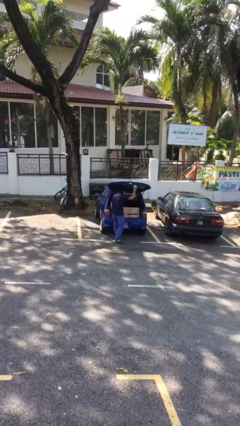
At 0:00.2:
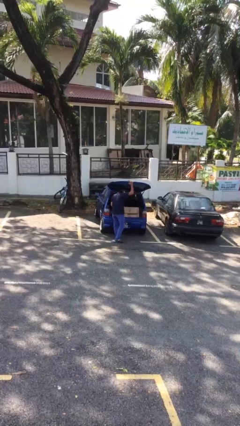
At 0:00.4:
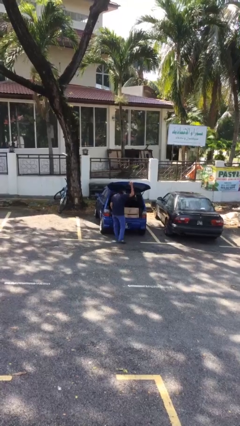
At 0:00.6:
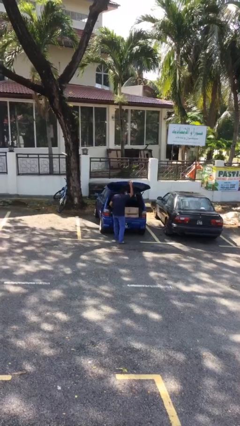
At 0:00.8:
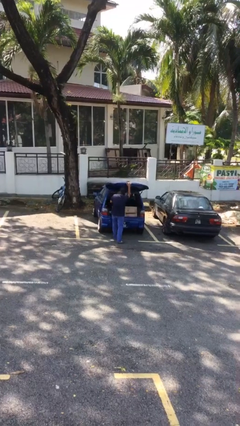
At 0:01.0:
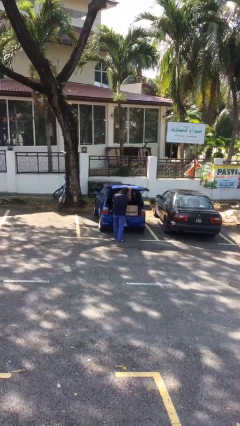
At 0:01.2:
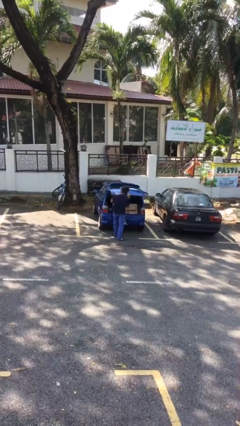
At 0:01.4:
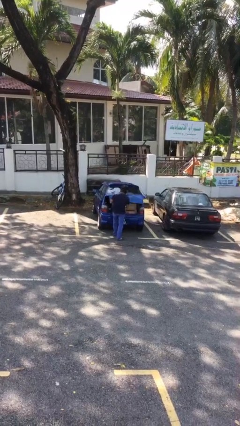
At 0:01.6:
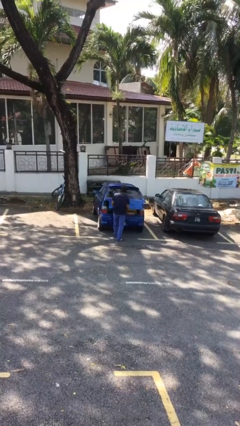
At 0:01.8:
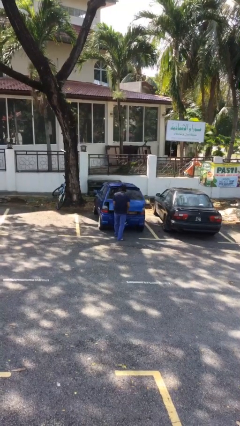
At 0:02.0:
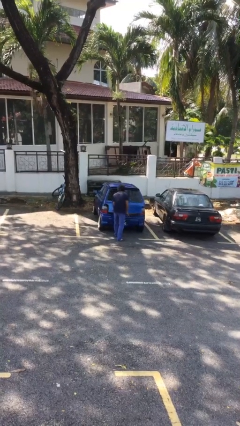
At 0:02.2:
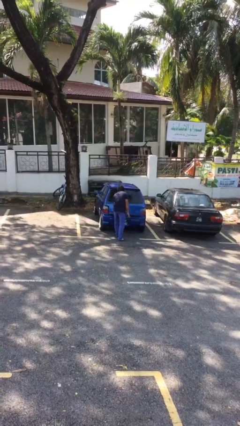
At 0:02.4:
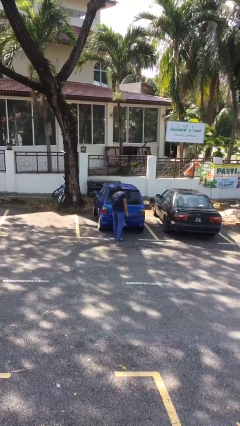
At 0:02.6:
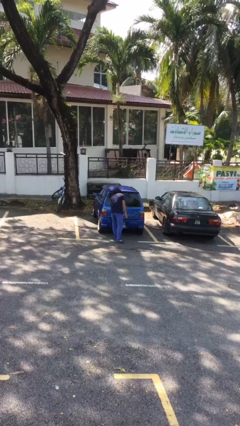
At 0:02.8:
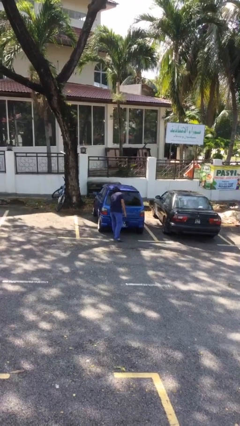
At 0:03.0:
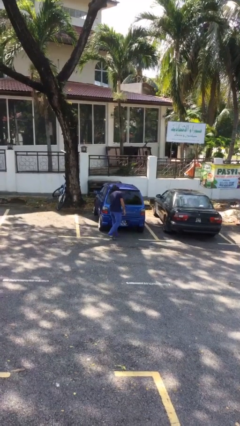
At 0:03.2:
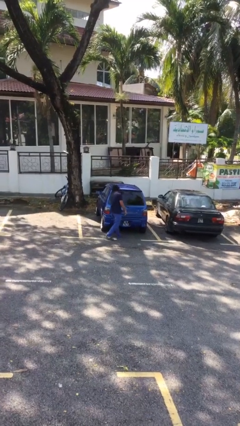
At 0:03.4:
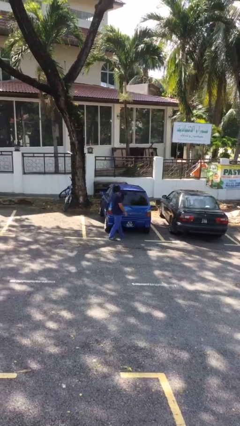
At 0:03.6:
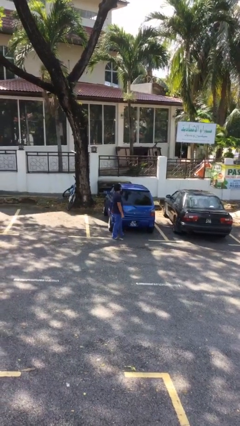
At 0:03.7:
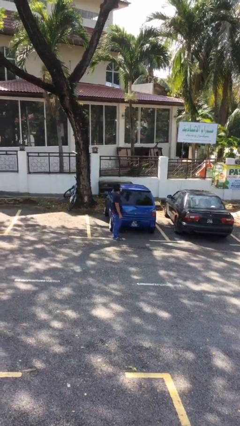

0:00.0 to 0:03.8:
person closes car trunk

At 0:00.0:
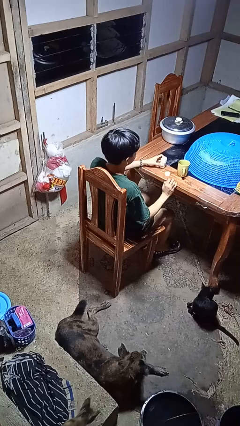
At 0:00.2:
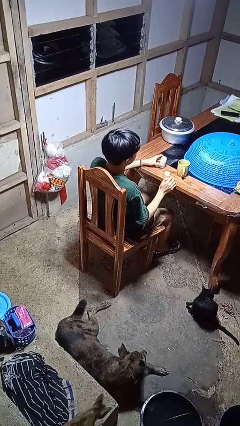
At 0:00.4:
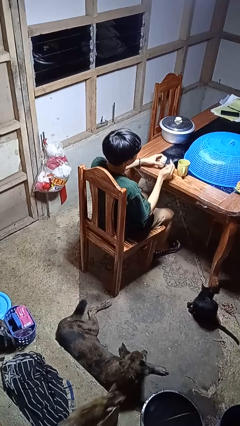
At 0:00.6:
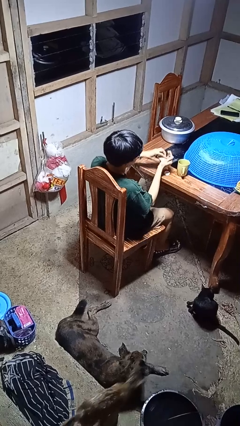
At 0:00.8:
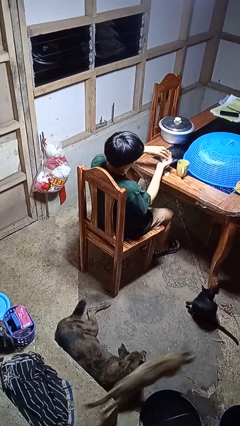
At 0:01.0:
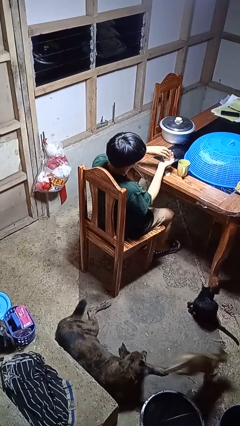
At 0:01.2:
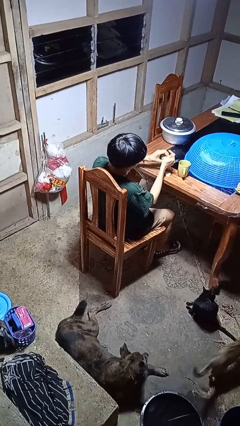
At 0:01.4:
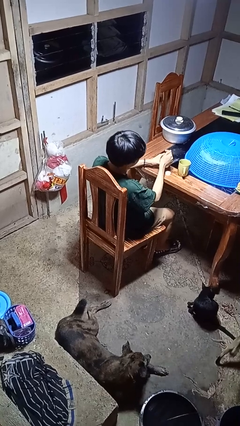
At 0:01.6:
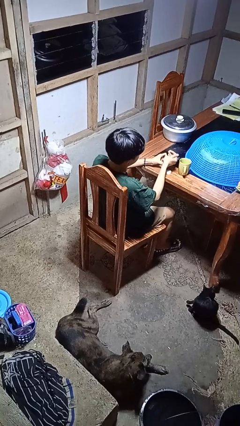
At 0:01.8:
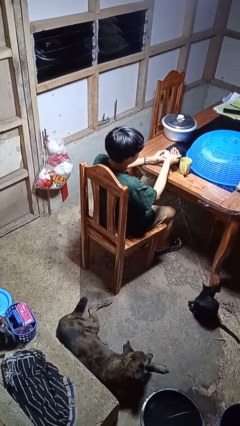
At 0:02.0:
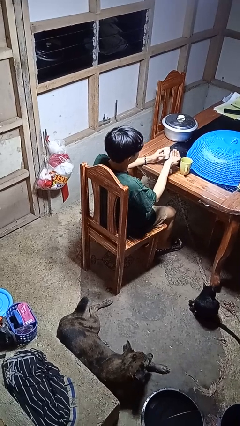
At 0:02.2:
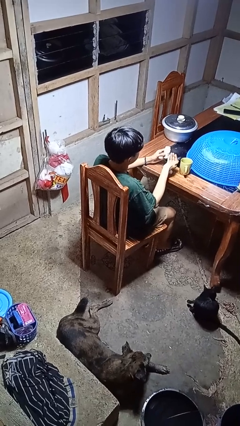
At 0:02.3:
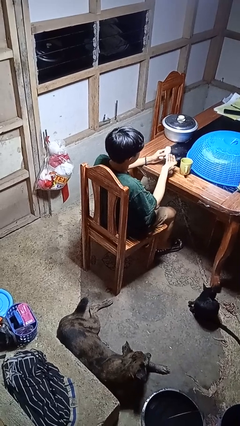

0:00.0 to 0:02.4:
person takes medicine pills

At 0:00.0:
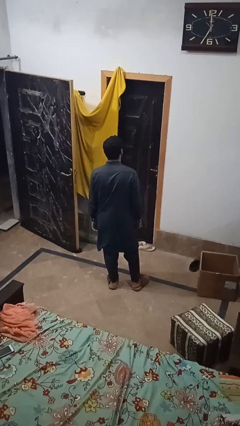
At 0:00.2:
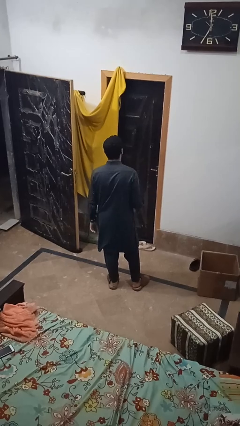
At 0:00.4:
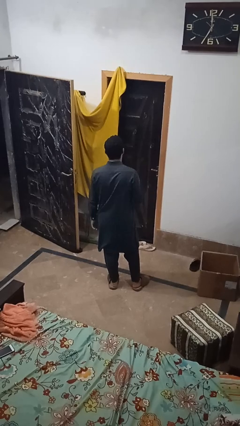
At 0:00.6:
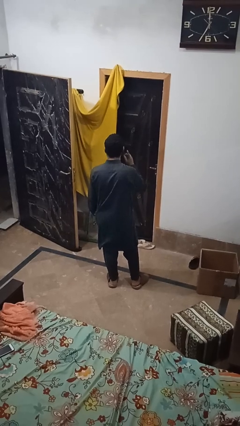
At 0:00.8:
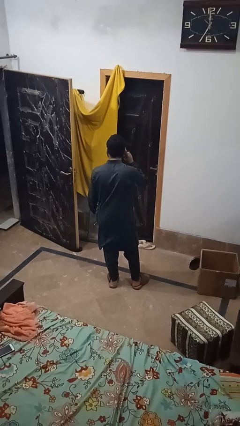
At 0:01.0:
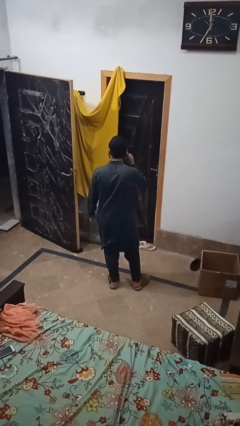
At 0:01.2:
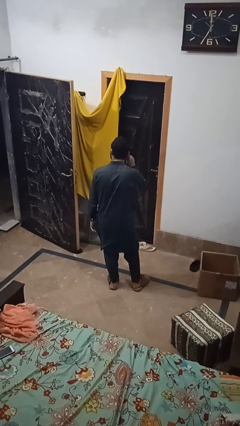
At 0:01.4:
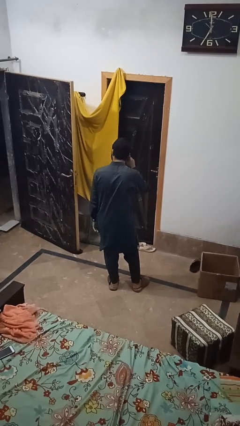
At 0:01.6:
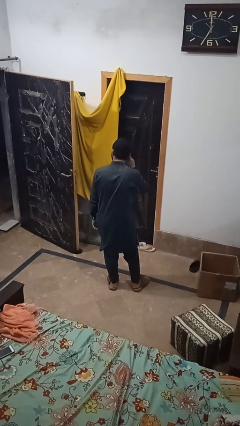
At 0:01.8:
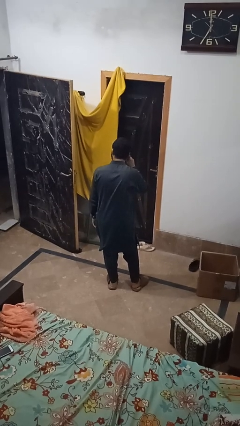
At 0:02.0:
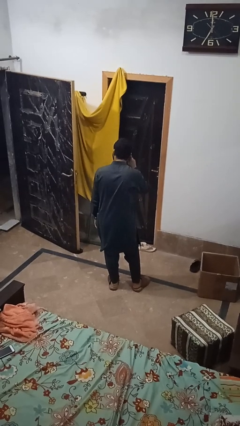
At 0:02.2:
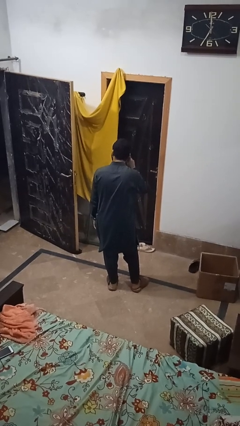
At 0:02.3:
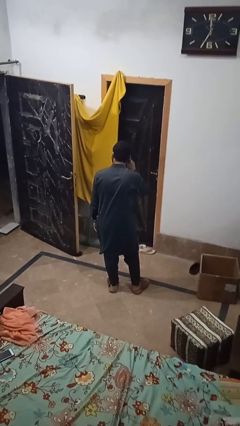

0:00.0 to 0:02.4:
person gestures listen closely

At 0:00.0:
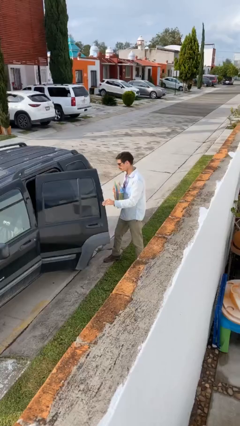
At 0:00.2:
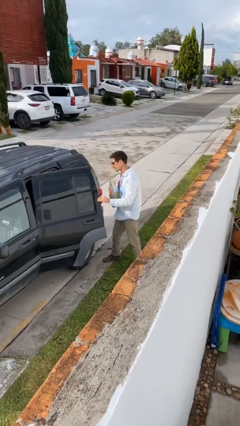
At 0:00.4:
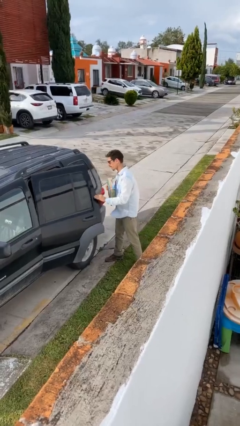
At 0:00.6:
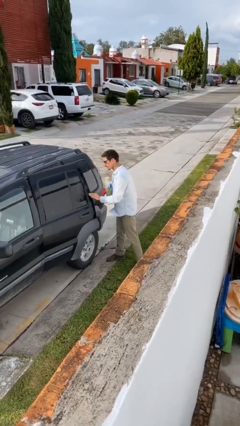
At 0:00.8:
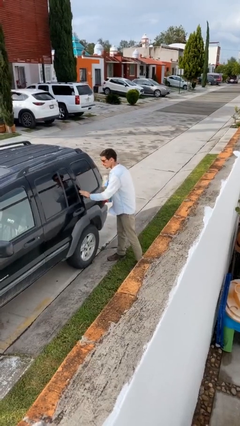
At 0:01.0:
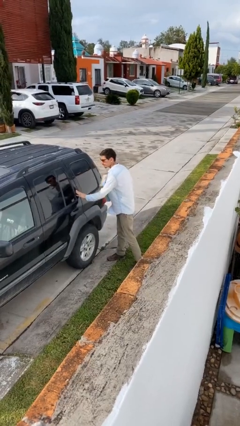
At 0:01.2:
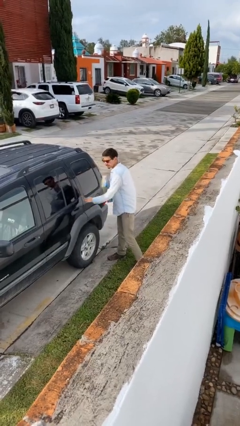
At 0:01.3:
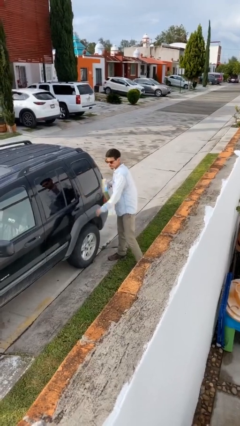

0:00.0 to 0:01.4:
person closes car door

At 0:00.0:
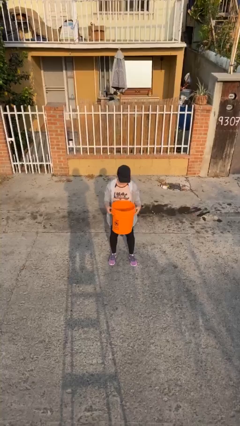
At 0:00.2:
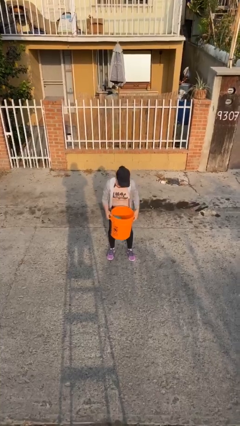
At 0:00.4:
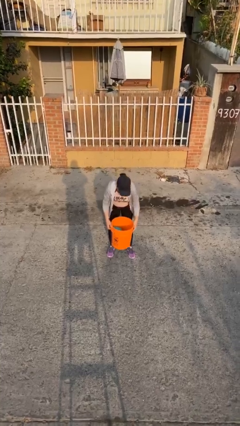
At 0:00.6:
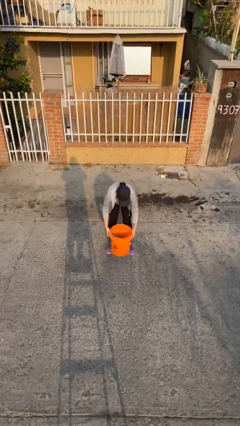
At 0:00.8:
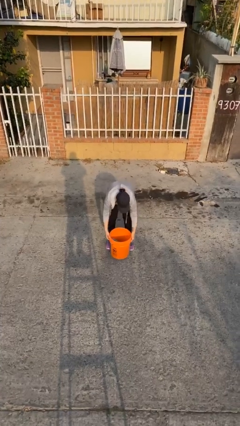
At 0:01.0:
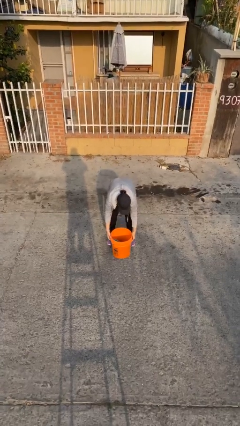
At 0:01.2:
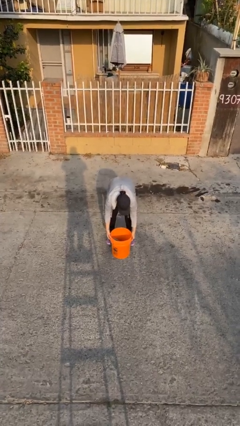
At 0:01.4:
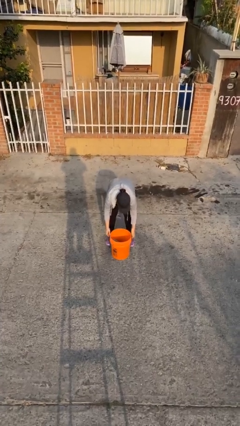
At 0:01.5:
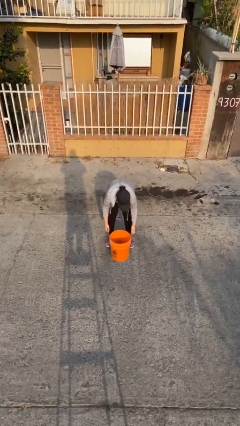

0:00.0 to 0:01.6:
person puts down object on floor

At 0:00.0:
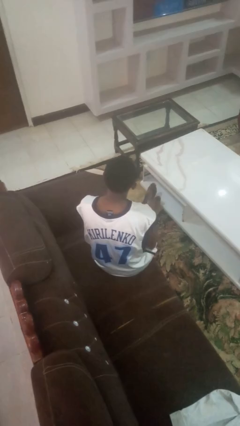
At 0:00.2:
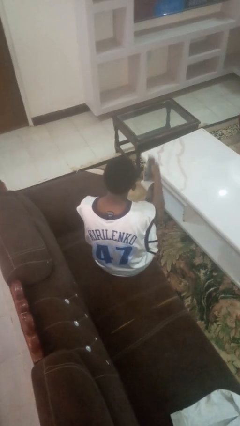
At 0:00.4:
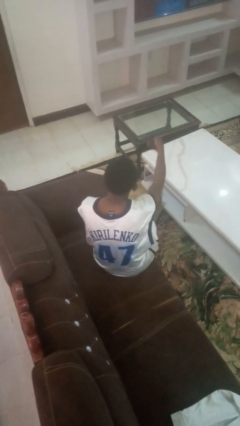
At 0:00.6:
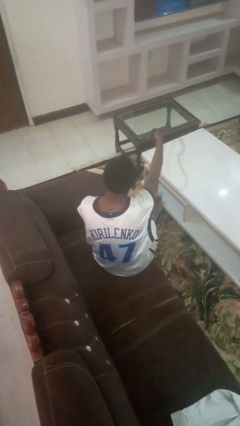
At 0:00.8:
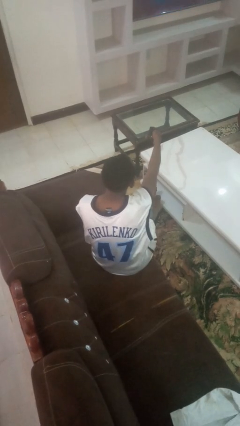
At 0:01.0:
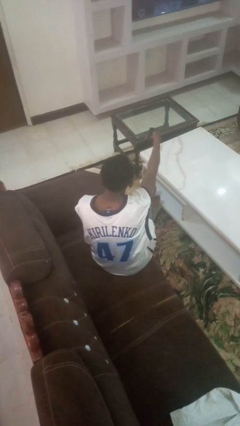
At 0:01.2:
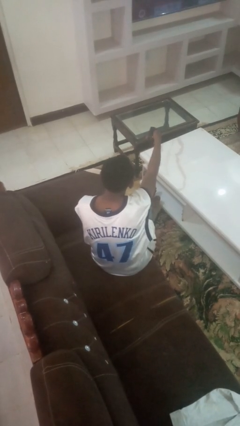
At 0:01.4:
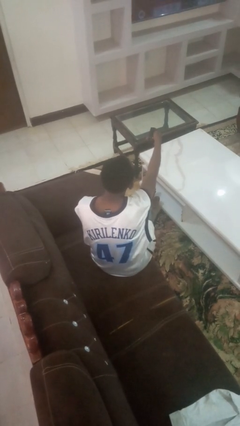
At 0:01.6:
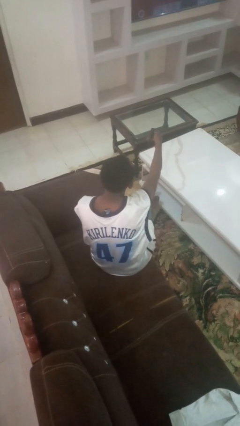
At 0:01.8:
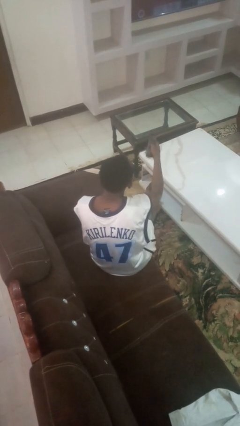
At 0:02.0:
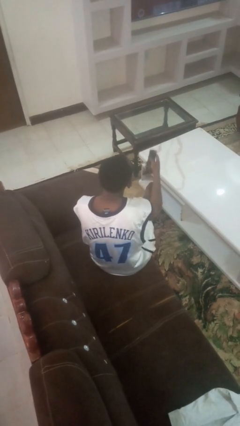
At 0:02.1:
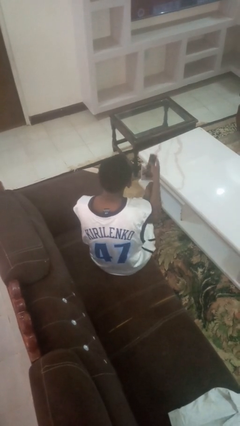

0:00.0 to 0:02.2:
person uses television remote

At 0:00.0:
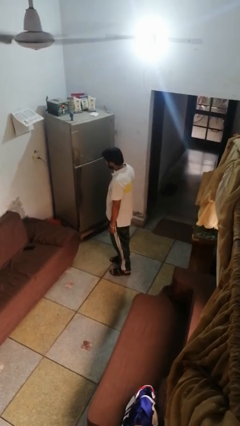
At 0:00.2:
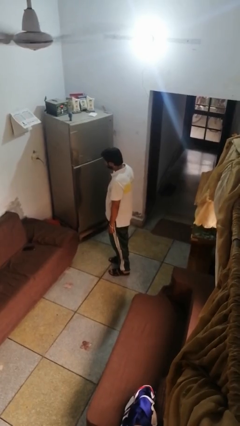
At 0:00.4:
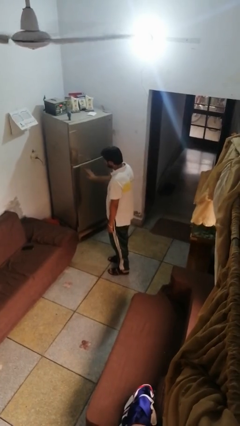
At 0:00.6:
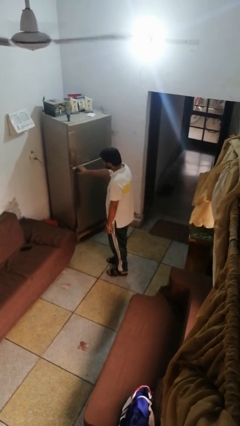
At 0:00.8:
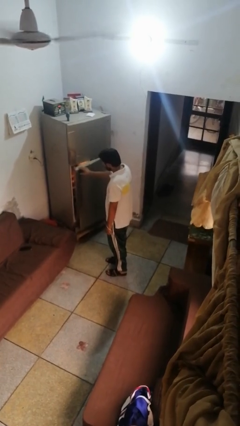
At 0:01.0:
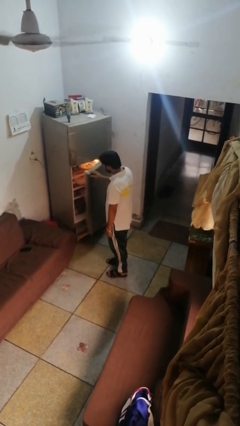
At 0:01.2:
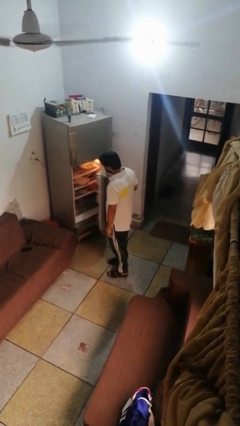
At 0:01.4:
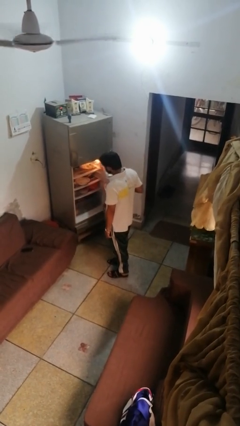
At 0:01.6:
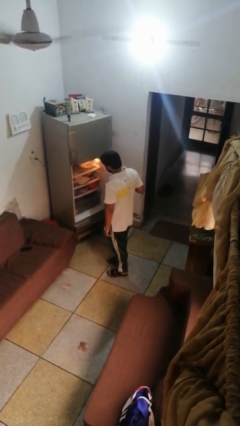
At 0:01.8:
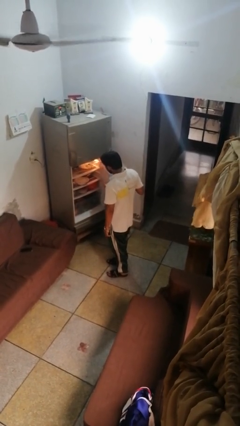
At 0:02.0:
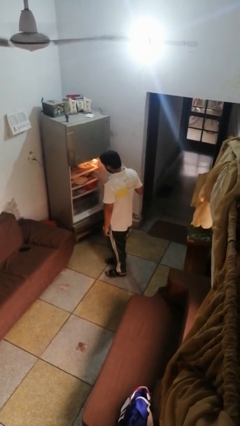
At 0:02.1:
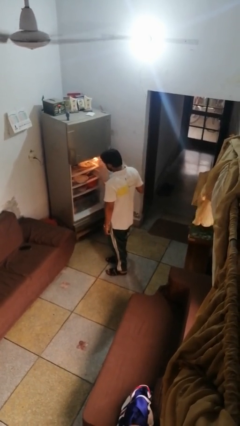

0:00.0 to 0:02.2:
person opens refrigerator

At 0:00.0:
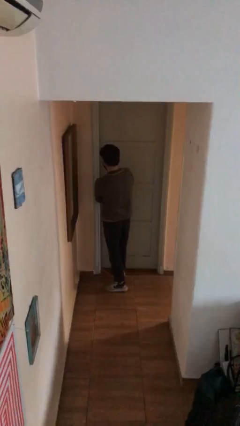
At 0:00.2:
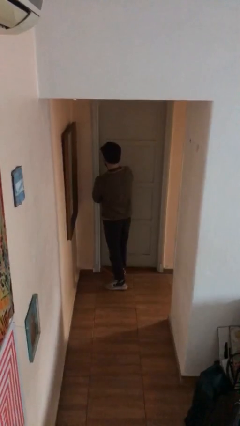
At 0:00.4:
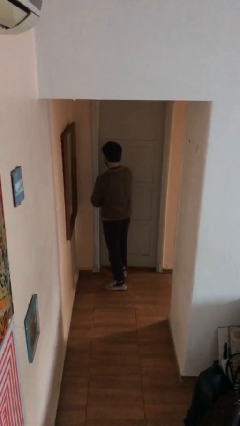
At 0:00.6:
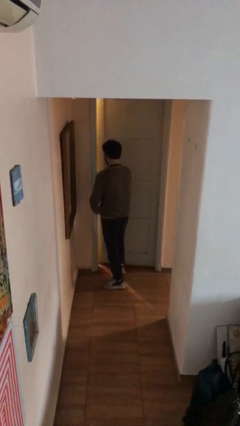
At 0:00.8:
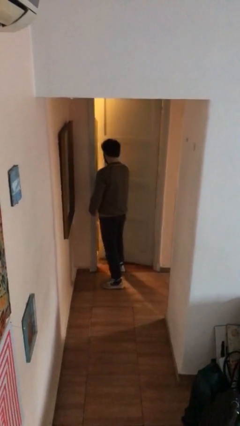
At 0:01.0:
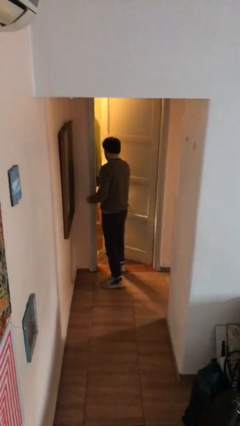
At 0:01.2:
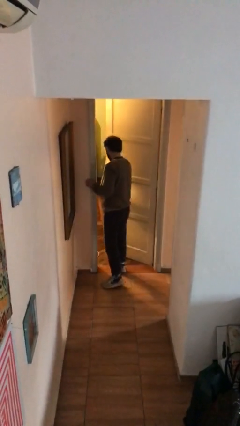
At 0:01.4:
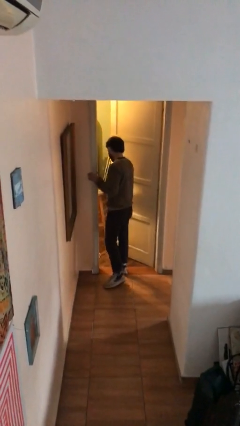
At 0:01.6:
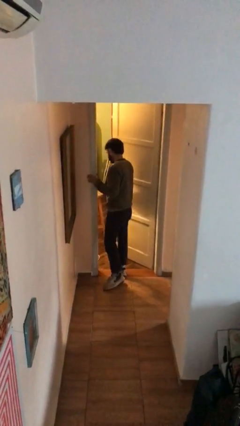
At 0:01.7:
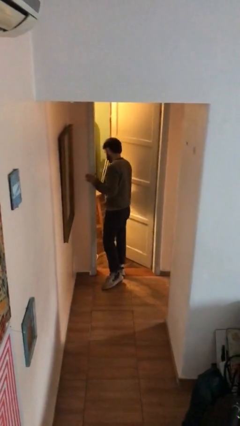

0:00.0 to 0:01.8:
person opens facility door
